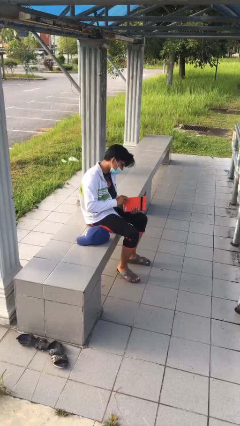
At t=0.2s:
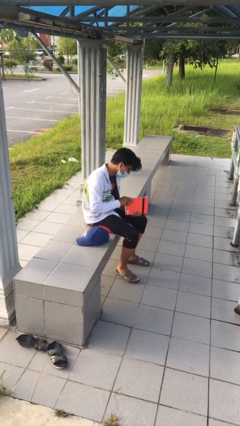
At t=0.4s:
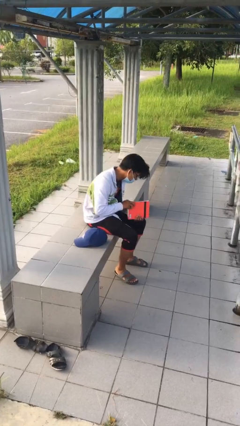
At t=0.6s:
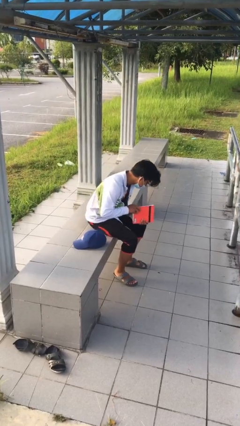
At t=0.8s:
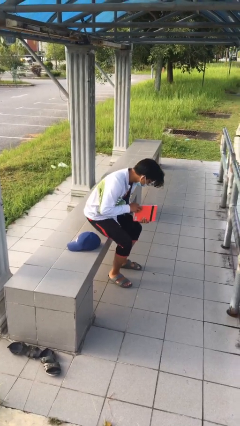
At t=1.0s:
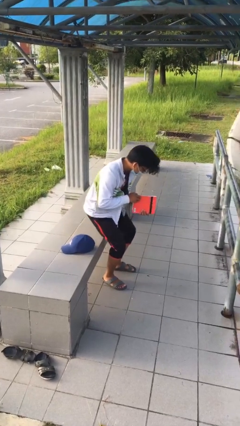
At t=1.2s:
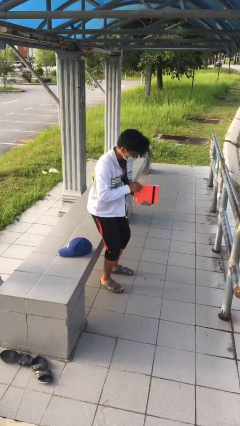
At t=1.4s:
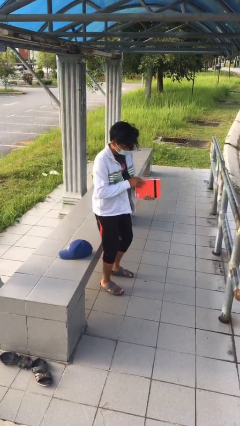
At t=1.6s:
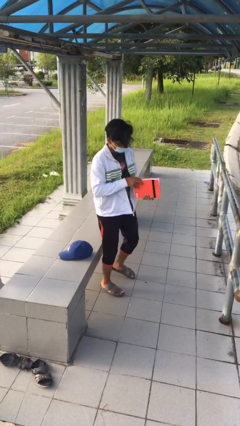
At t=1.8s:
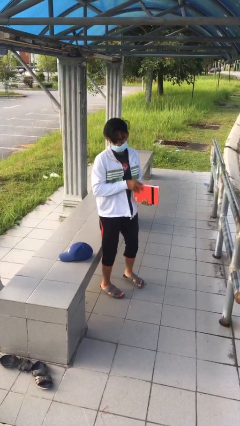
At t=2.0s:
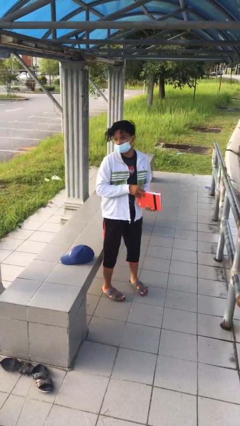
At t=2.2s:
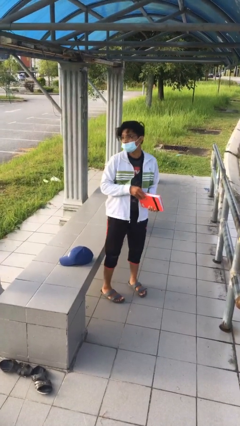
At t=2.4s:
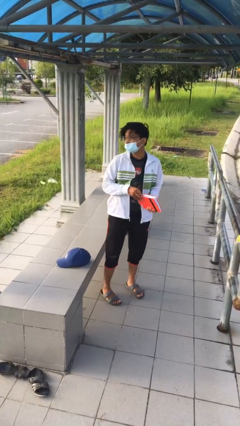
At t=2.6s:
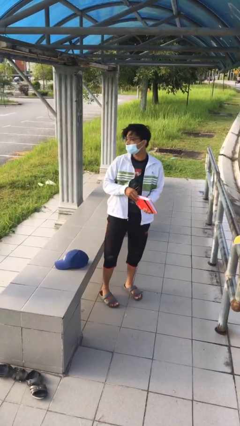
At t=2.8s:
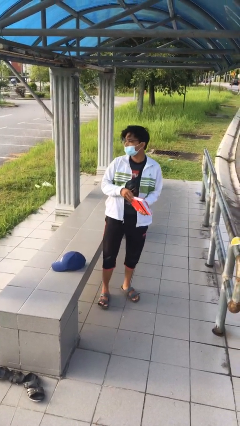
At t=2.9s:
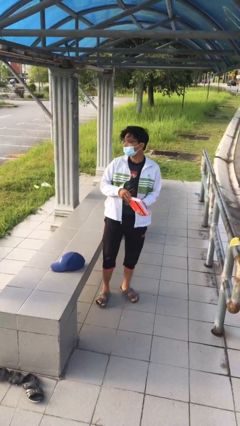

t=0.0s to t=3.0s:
person stands up

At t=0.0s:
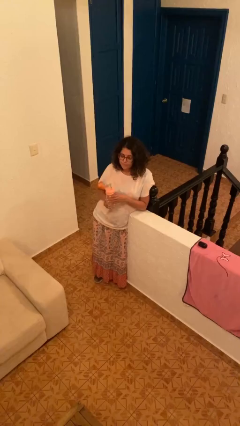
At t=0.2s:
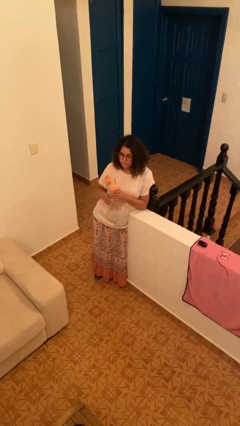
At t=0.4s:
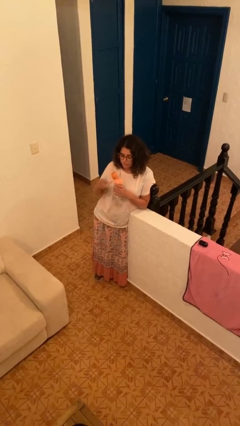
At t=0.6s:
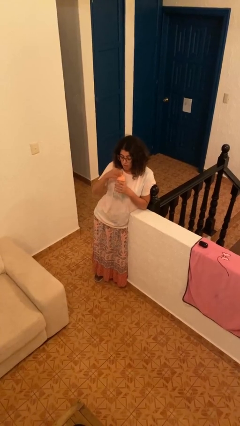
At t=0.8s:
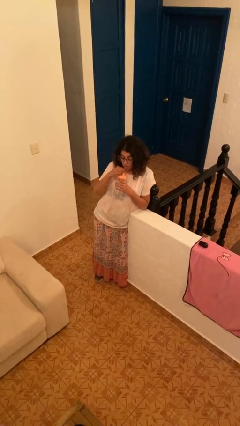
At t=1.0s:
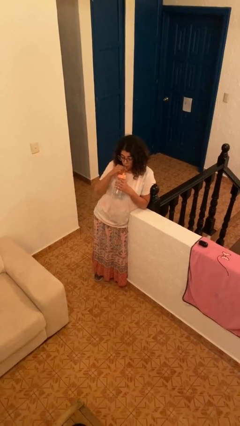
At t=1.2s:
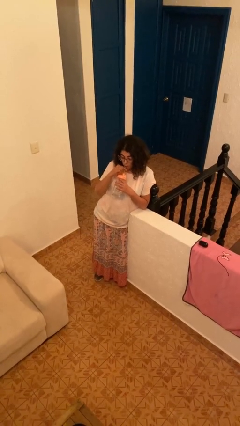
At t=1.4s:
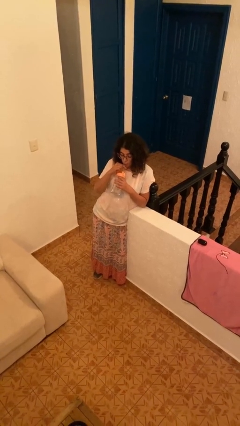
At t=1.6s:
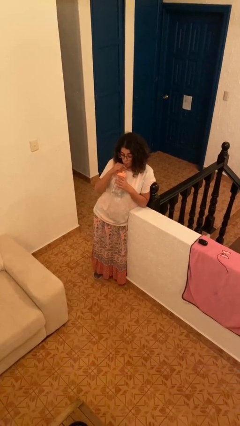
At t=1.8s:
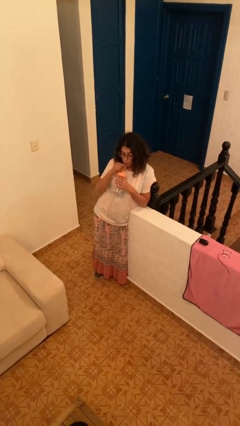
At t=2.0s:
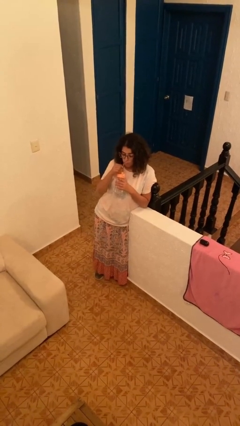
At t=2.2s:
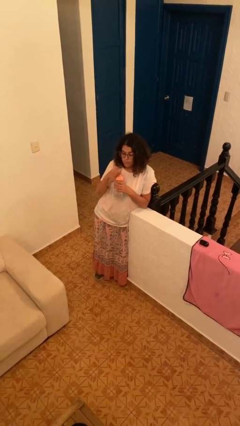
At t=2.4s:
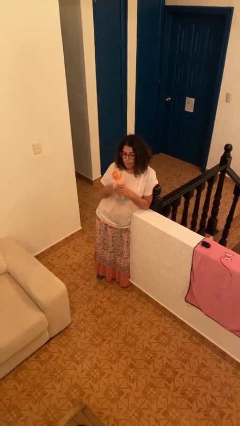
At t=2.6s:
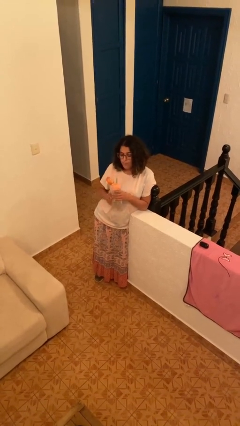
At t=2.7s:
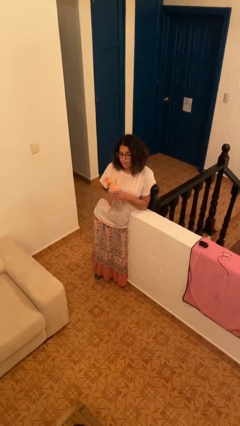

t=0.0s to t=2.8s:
person drinks from straw

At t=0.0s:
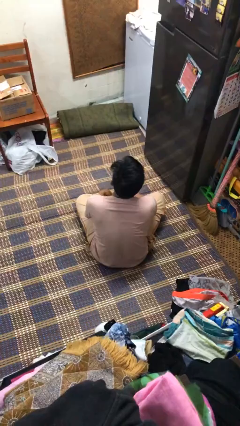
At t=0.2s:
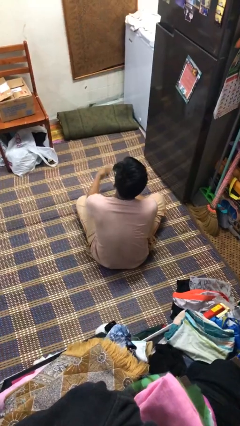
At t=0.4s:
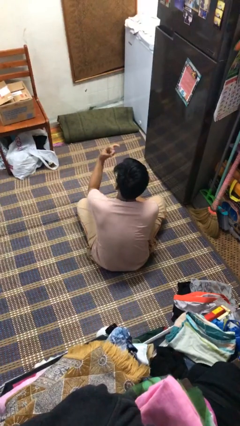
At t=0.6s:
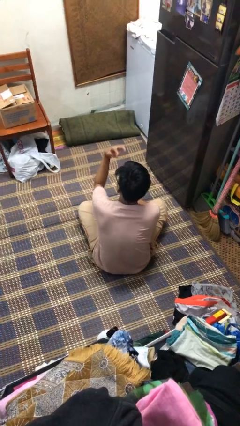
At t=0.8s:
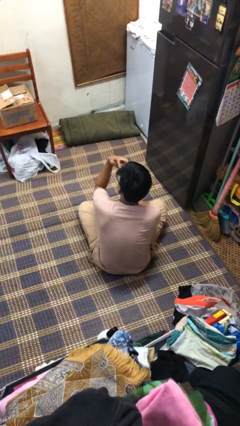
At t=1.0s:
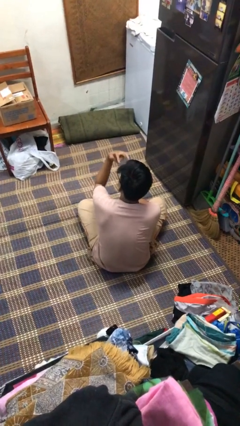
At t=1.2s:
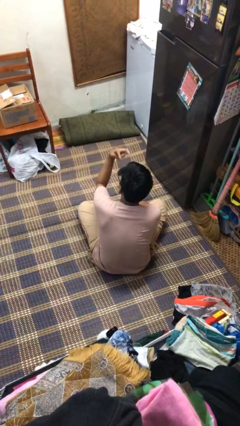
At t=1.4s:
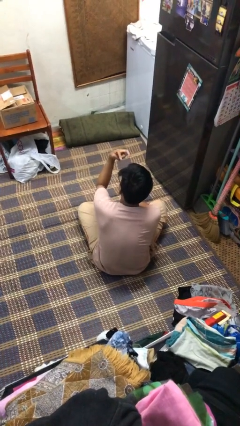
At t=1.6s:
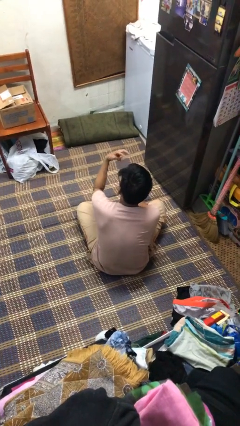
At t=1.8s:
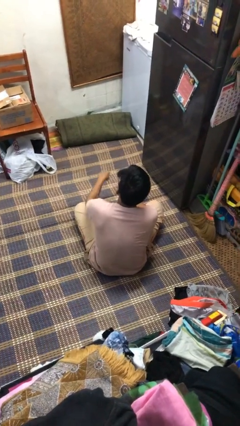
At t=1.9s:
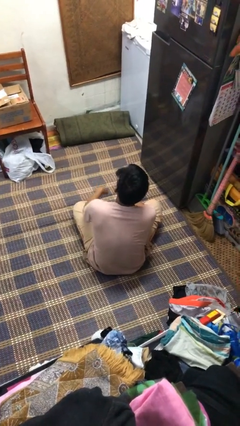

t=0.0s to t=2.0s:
person gestures watch closely

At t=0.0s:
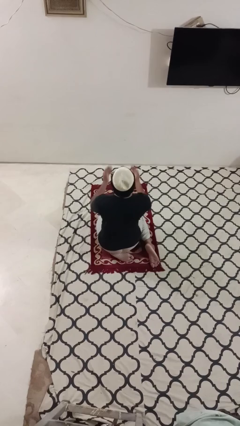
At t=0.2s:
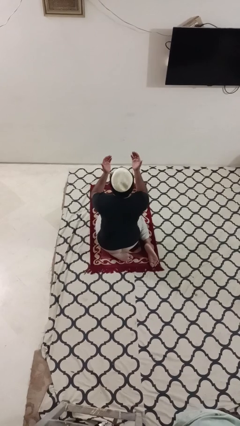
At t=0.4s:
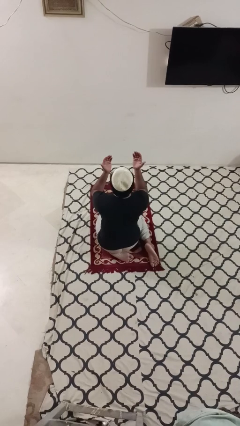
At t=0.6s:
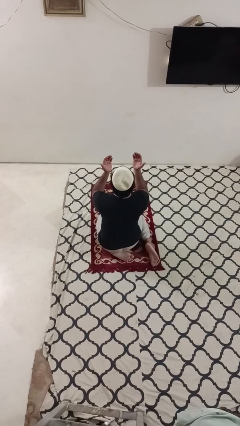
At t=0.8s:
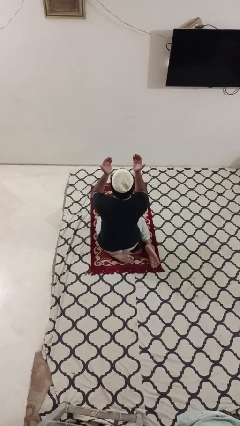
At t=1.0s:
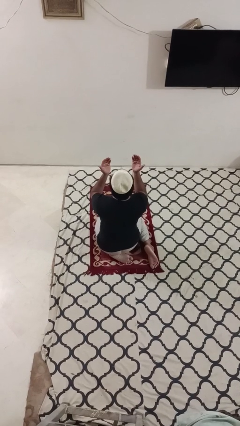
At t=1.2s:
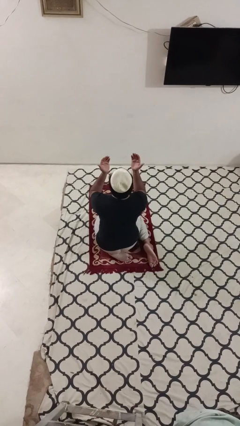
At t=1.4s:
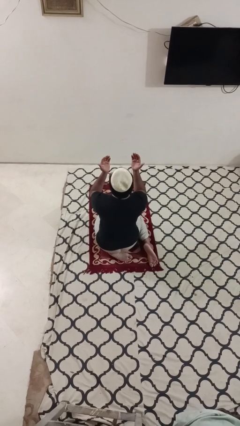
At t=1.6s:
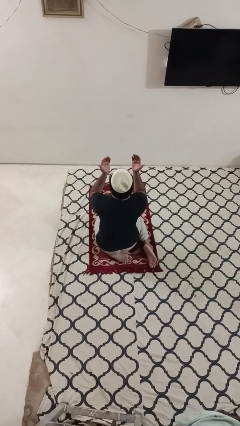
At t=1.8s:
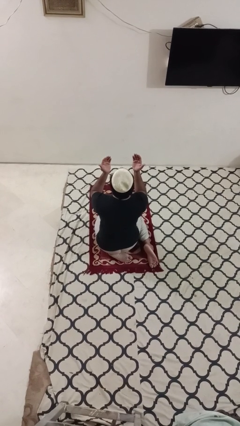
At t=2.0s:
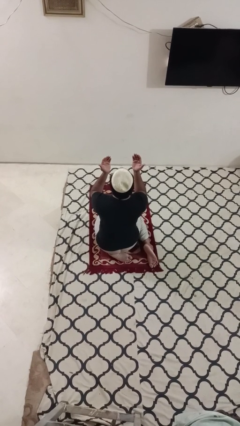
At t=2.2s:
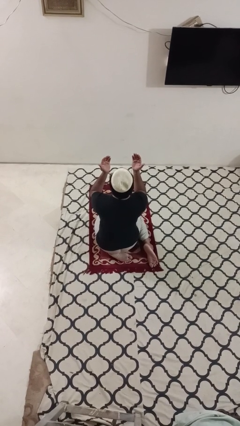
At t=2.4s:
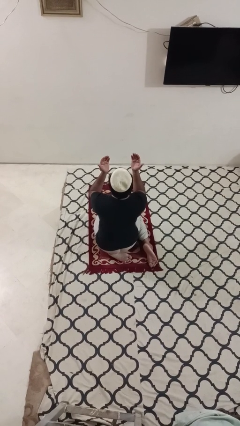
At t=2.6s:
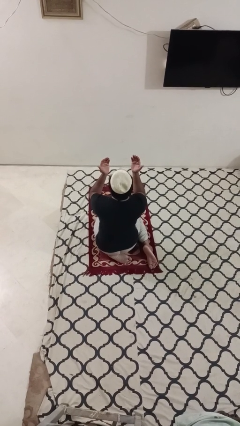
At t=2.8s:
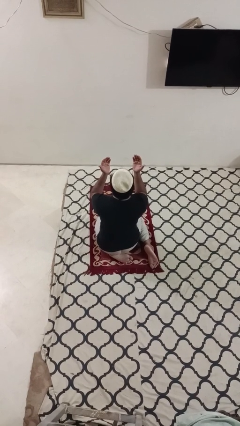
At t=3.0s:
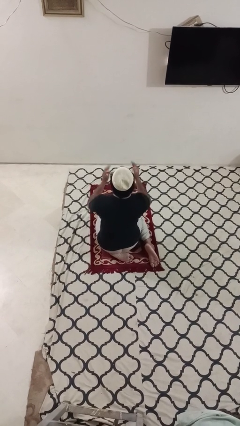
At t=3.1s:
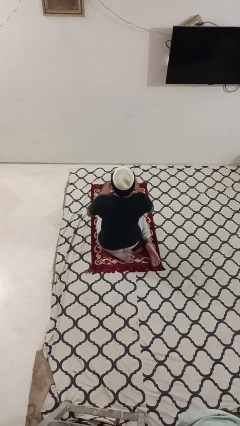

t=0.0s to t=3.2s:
person prays

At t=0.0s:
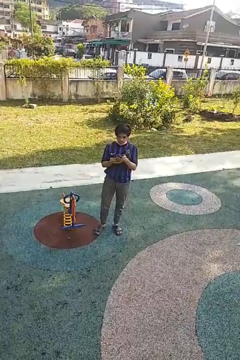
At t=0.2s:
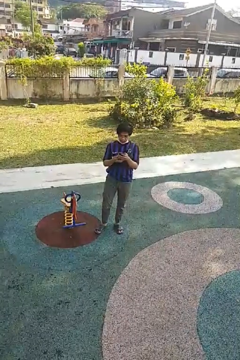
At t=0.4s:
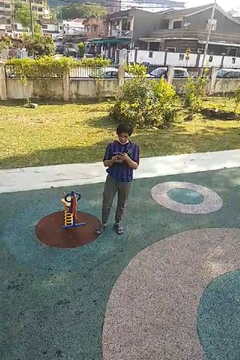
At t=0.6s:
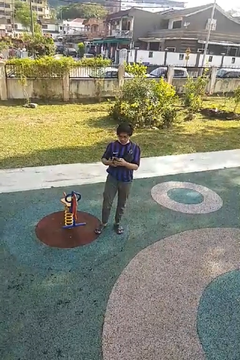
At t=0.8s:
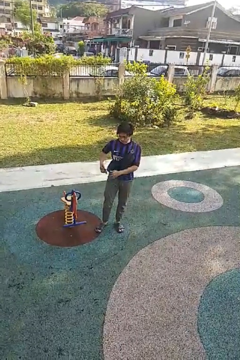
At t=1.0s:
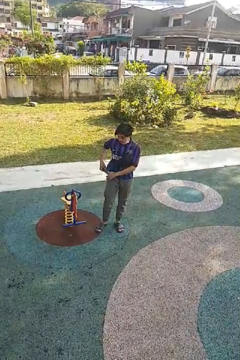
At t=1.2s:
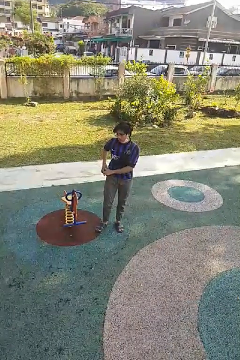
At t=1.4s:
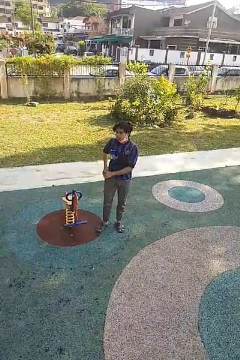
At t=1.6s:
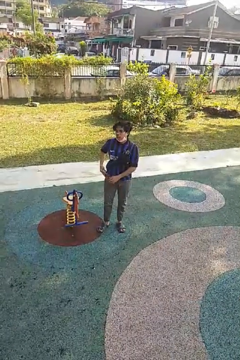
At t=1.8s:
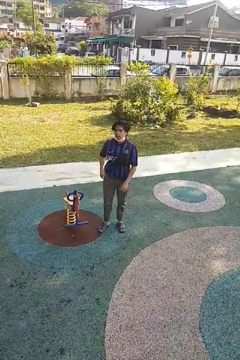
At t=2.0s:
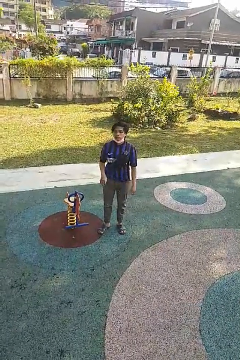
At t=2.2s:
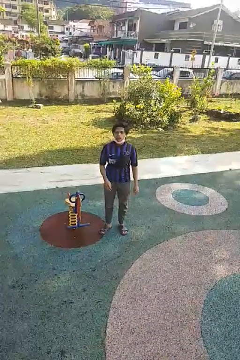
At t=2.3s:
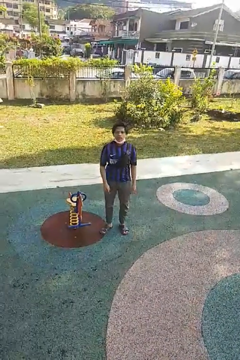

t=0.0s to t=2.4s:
person puts phone into pocket

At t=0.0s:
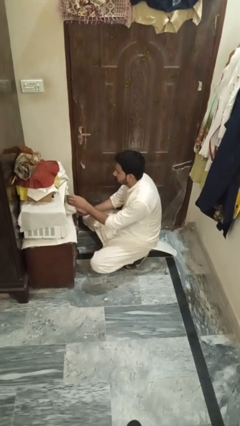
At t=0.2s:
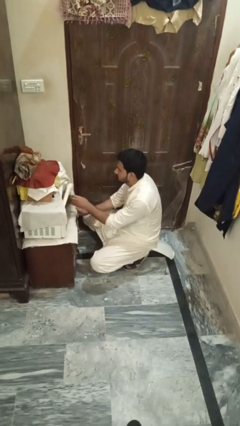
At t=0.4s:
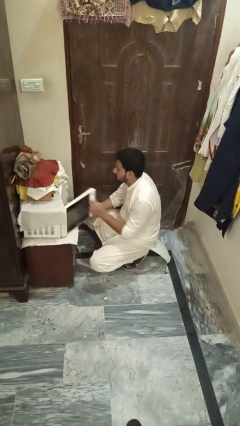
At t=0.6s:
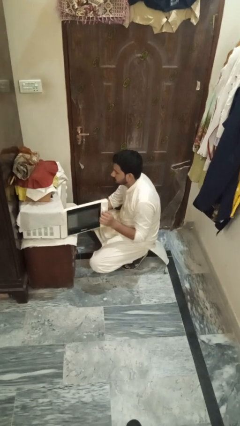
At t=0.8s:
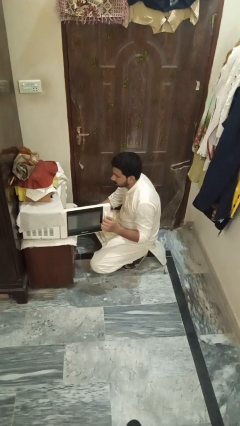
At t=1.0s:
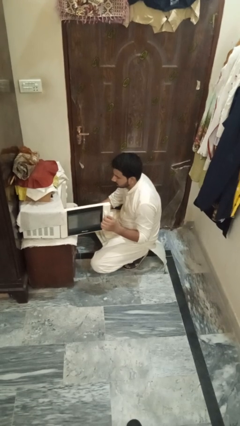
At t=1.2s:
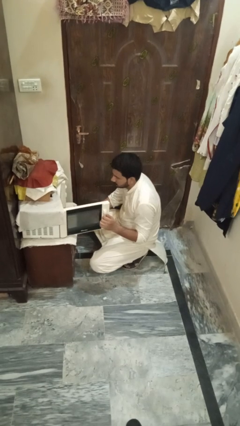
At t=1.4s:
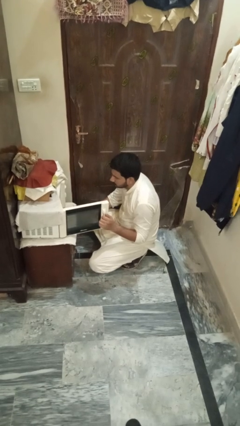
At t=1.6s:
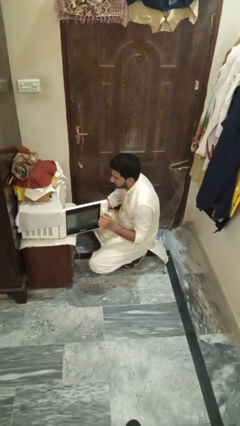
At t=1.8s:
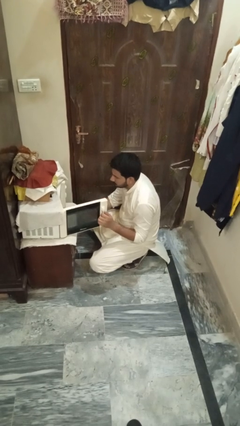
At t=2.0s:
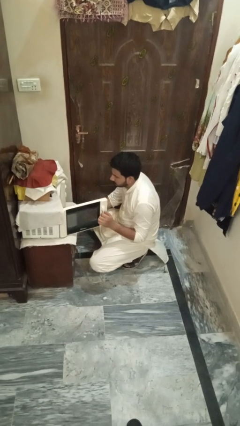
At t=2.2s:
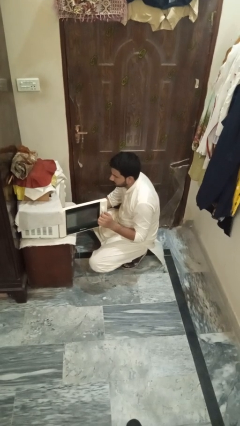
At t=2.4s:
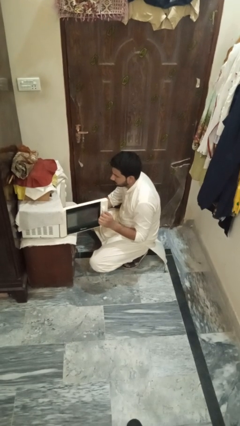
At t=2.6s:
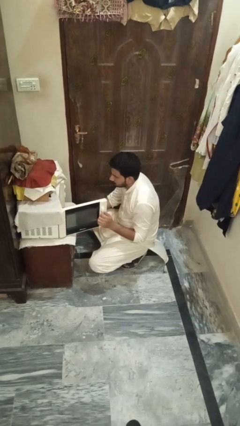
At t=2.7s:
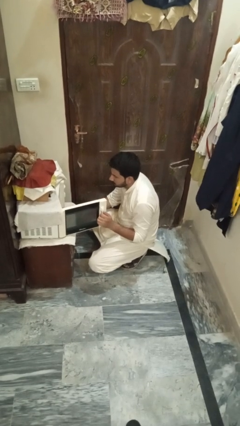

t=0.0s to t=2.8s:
person opens microwave

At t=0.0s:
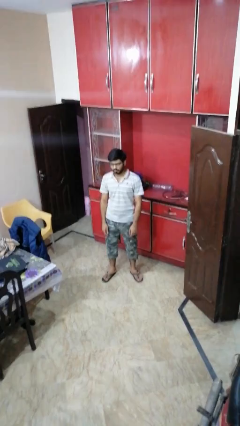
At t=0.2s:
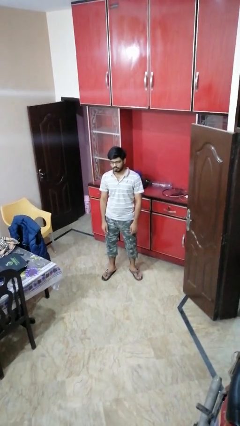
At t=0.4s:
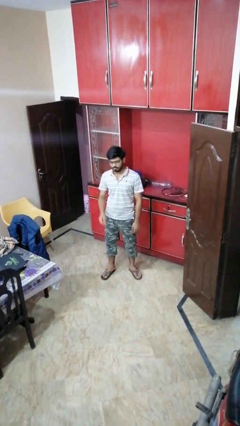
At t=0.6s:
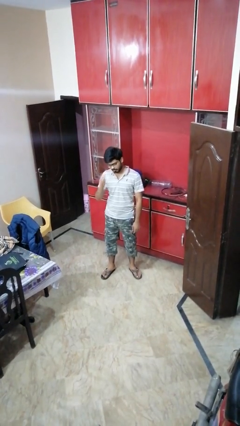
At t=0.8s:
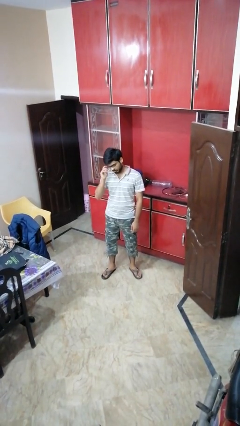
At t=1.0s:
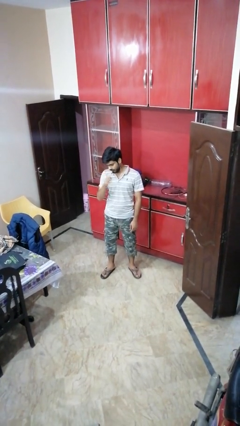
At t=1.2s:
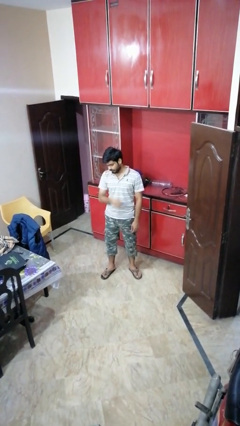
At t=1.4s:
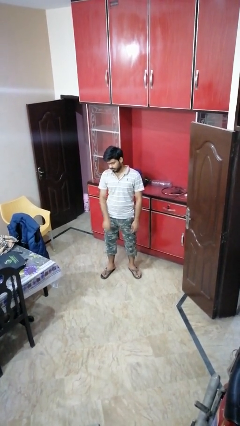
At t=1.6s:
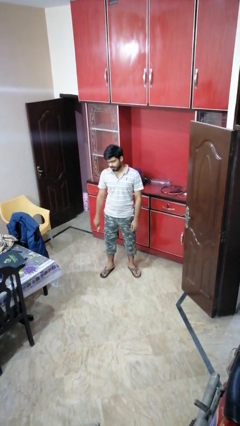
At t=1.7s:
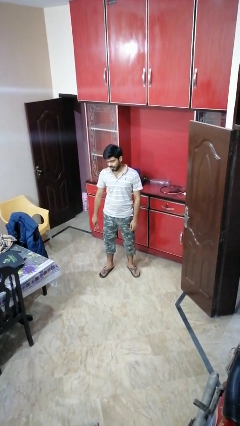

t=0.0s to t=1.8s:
person takes off glasses
